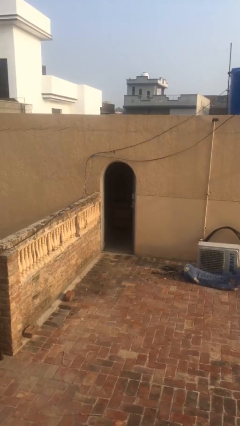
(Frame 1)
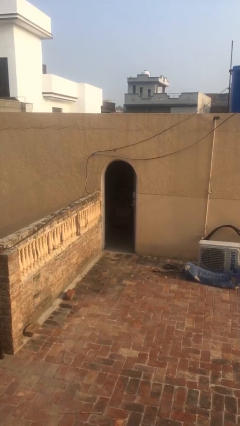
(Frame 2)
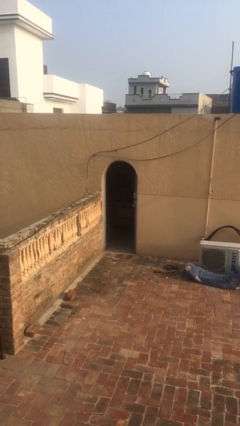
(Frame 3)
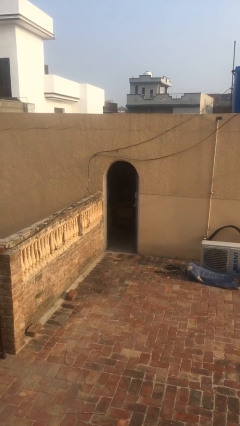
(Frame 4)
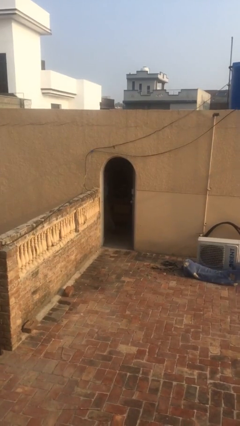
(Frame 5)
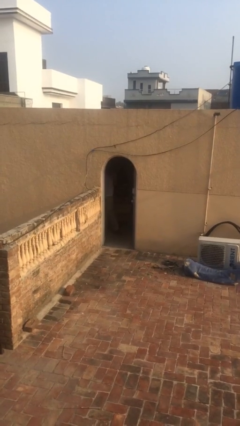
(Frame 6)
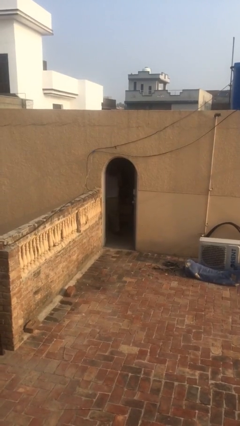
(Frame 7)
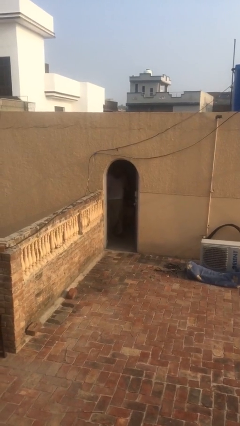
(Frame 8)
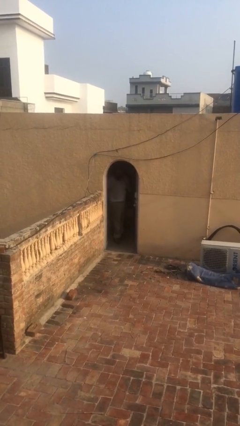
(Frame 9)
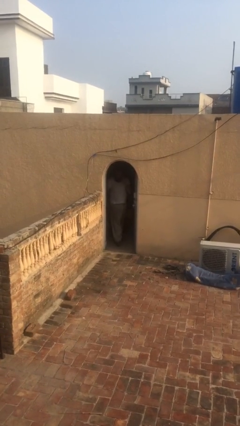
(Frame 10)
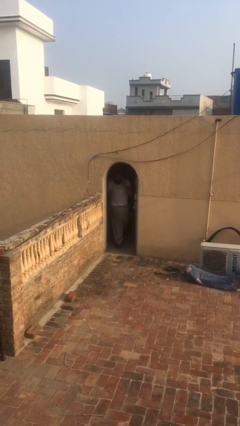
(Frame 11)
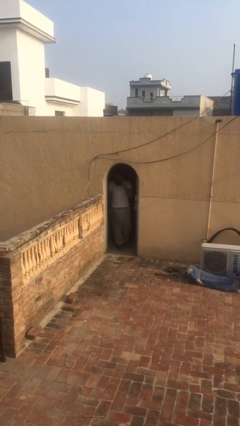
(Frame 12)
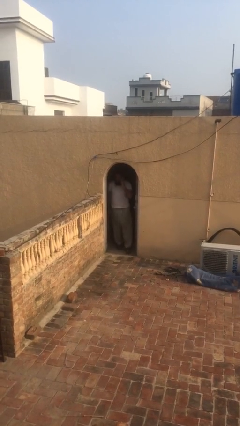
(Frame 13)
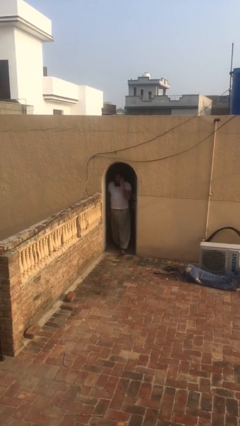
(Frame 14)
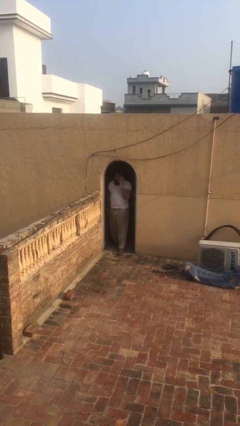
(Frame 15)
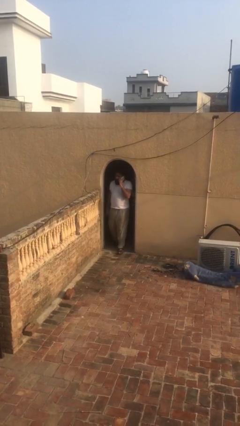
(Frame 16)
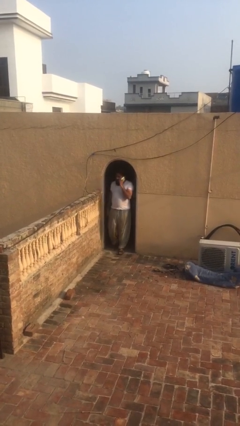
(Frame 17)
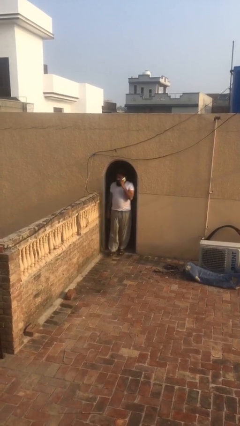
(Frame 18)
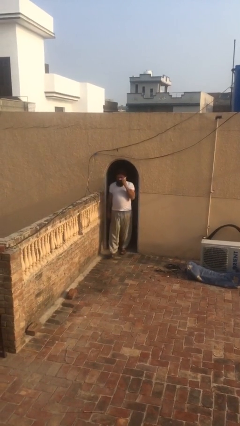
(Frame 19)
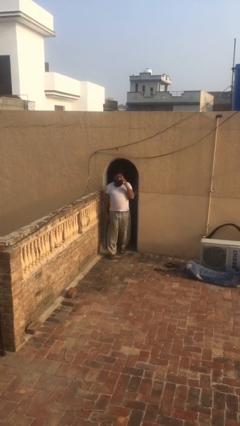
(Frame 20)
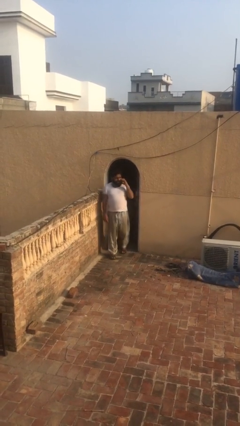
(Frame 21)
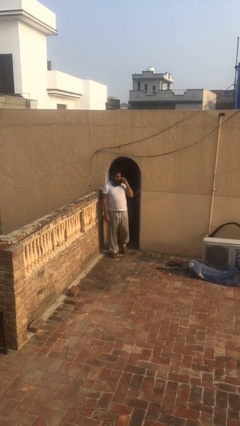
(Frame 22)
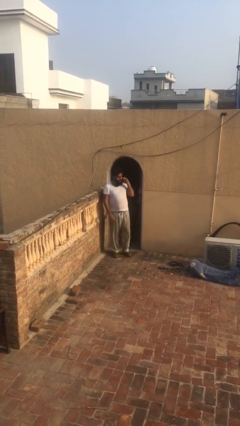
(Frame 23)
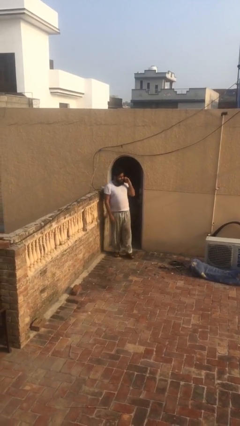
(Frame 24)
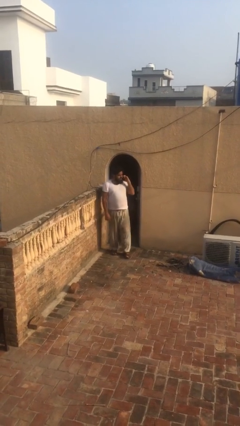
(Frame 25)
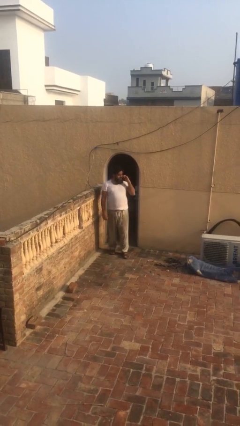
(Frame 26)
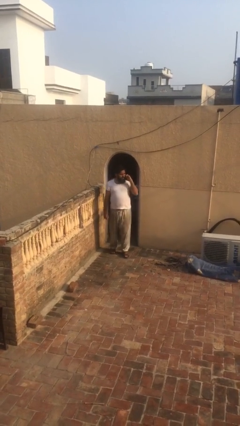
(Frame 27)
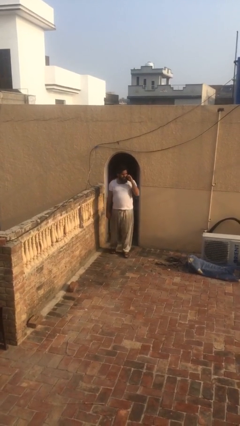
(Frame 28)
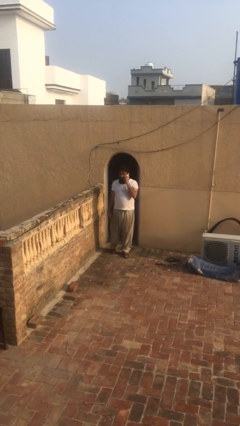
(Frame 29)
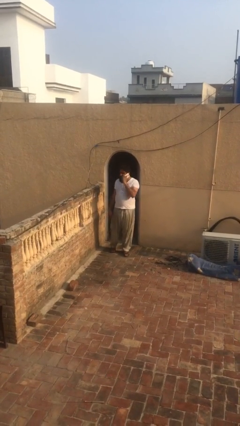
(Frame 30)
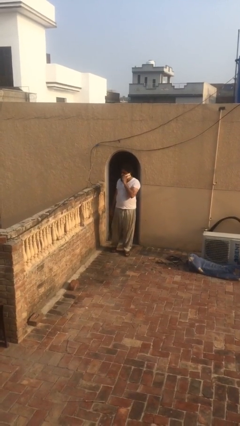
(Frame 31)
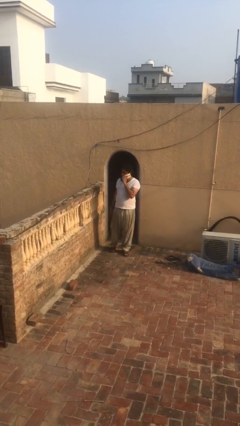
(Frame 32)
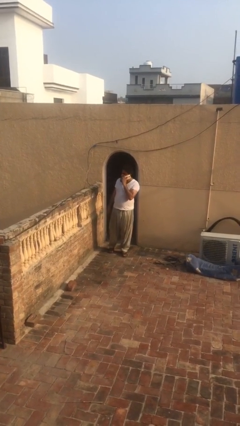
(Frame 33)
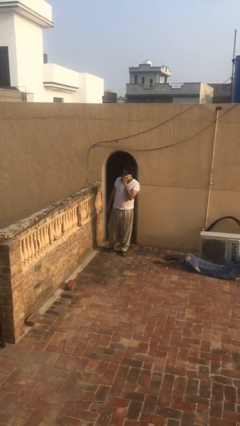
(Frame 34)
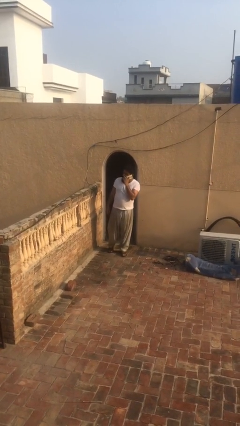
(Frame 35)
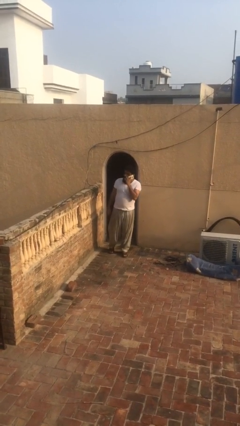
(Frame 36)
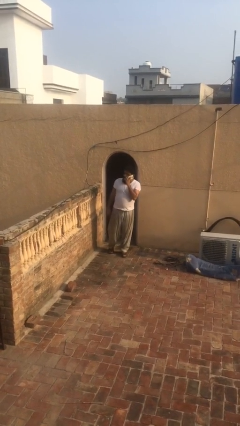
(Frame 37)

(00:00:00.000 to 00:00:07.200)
person enters scene through structure

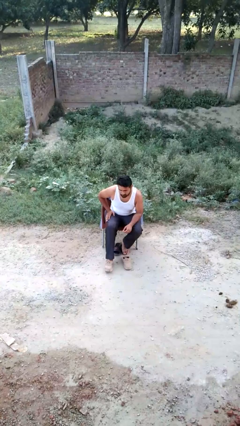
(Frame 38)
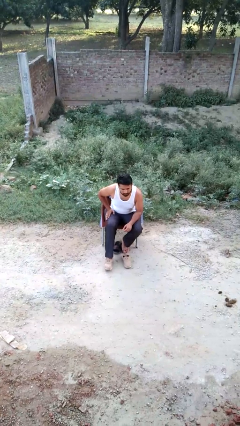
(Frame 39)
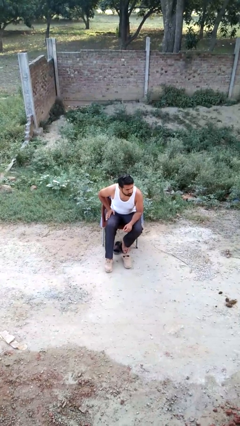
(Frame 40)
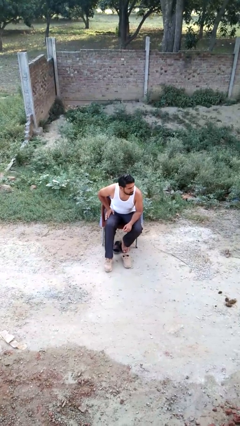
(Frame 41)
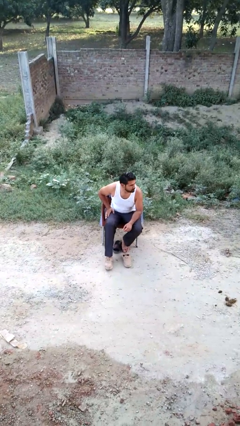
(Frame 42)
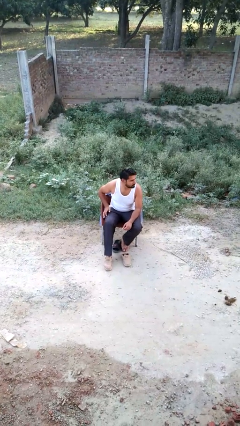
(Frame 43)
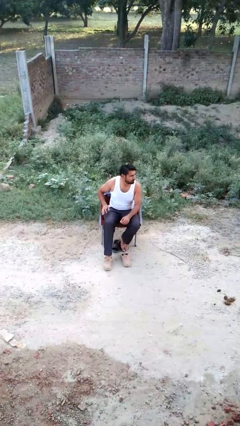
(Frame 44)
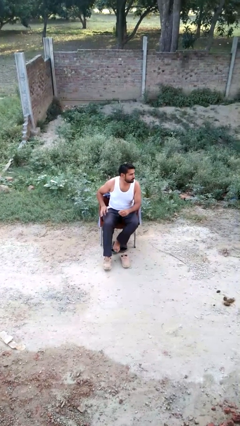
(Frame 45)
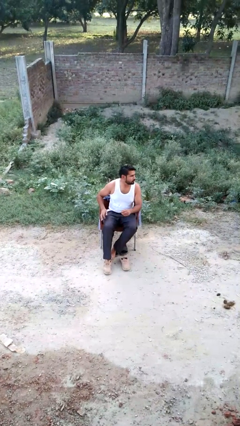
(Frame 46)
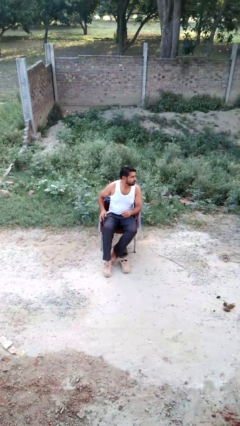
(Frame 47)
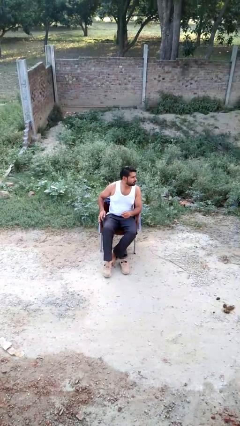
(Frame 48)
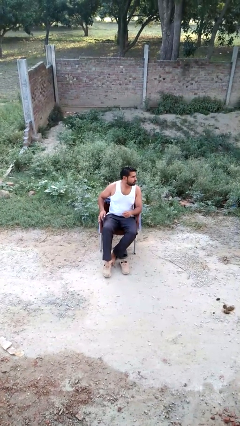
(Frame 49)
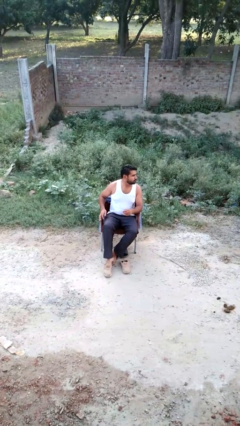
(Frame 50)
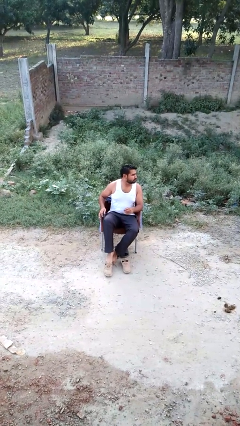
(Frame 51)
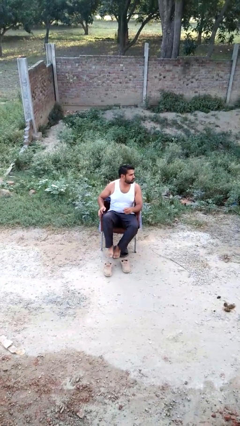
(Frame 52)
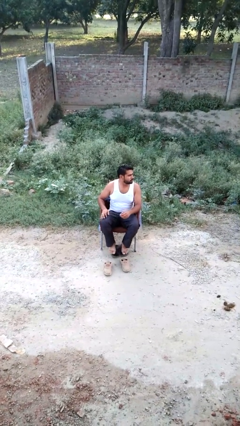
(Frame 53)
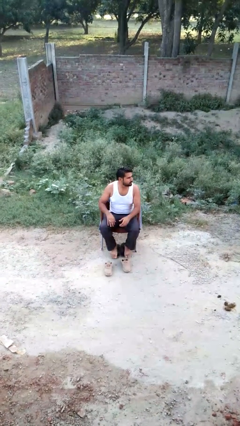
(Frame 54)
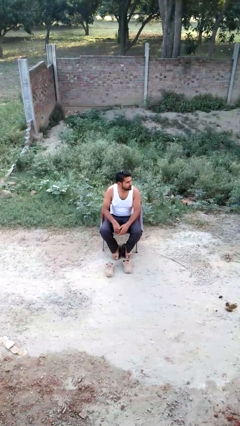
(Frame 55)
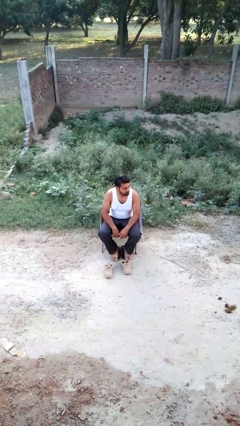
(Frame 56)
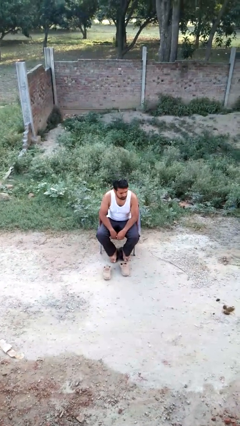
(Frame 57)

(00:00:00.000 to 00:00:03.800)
person takes off shoes

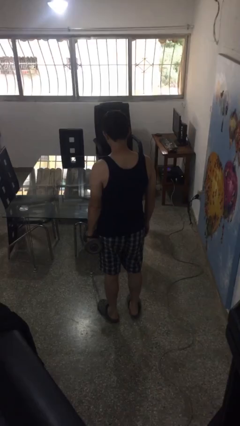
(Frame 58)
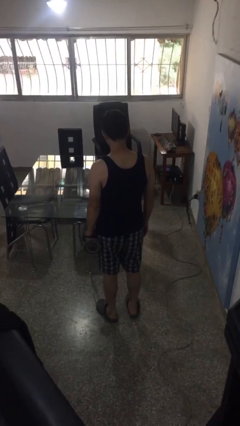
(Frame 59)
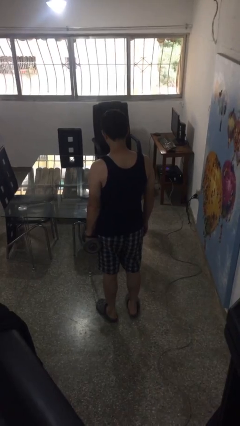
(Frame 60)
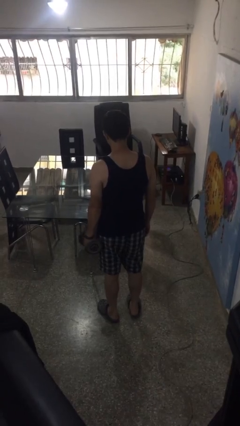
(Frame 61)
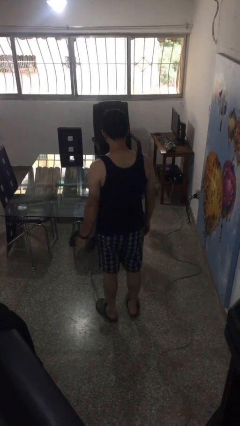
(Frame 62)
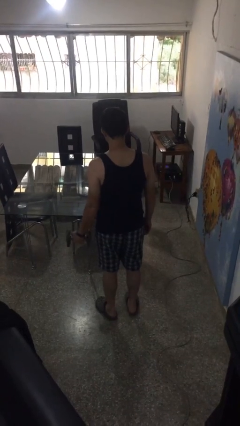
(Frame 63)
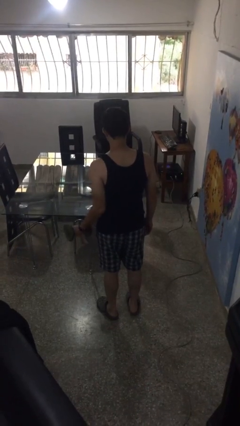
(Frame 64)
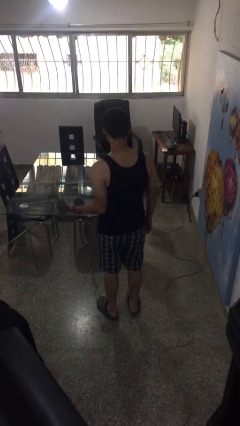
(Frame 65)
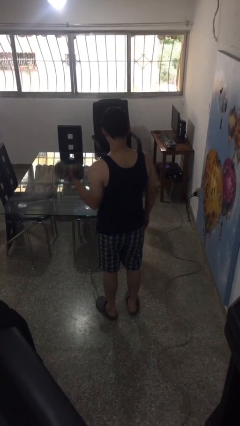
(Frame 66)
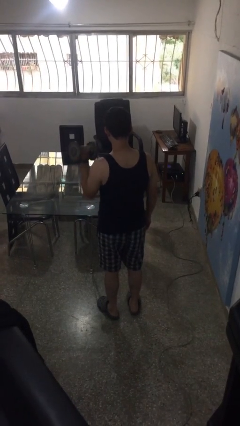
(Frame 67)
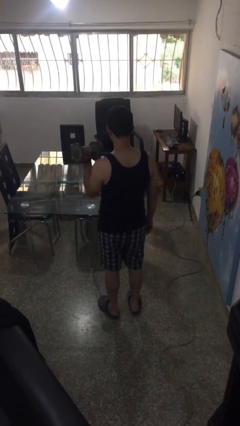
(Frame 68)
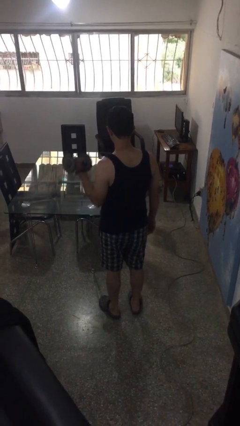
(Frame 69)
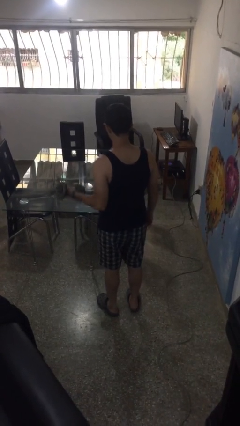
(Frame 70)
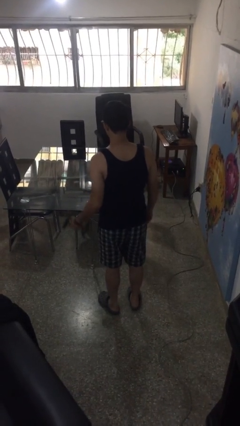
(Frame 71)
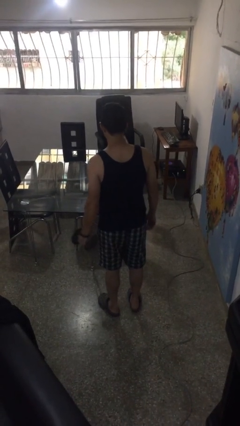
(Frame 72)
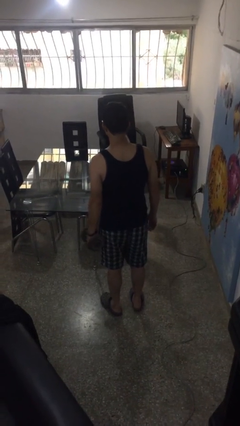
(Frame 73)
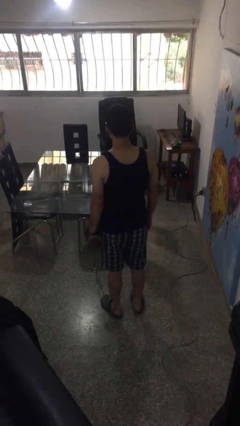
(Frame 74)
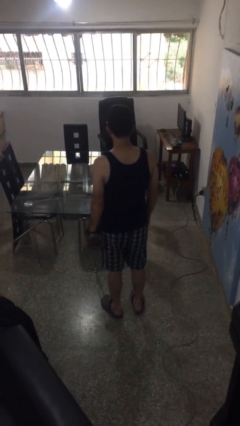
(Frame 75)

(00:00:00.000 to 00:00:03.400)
person lifts dumbbells

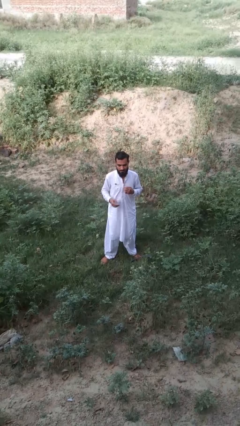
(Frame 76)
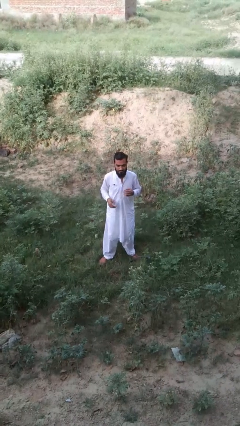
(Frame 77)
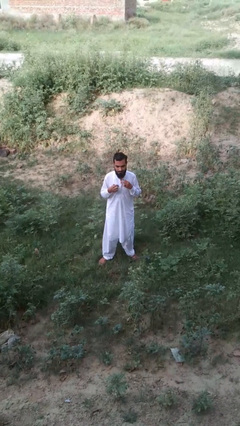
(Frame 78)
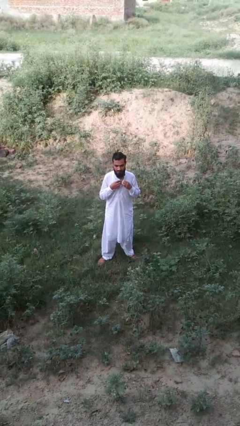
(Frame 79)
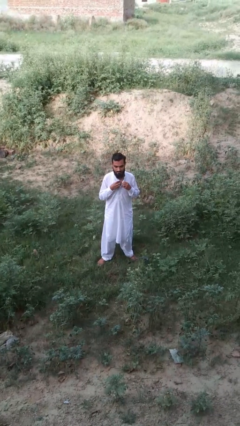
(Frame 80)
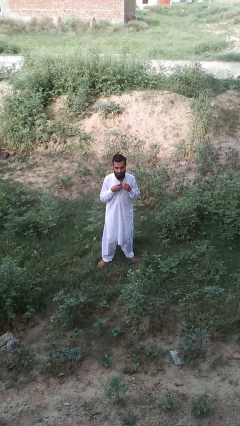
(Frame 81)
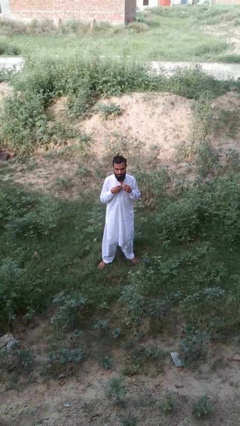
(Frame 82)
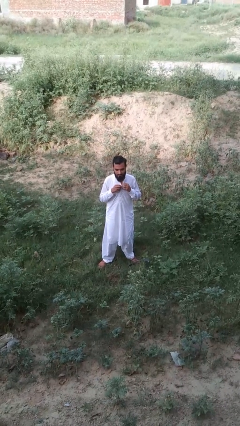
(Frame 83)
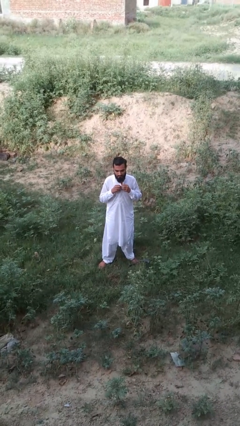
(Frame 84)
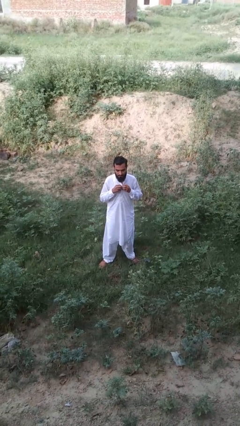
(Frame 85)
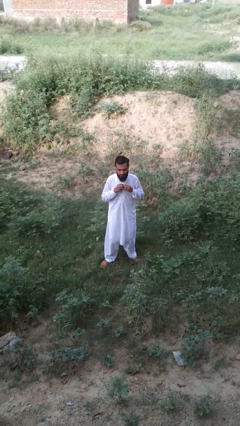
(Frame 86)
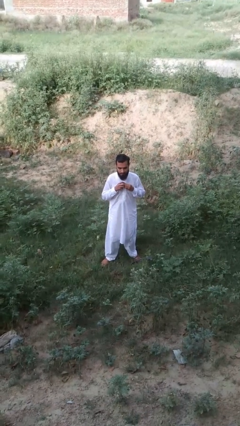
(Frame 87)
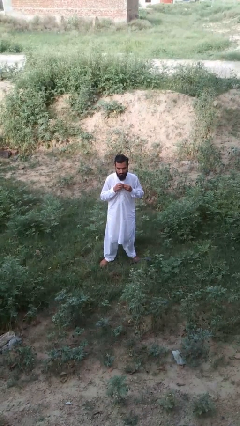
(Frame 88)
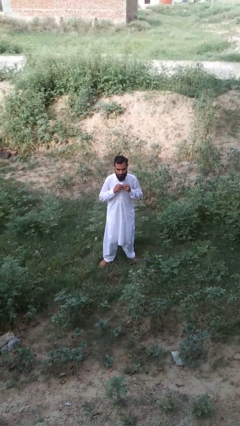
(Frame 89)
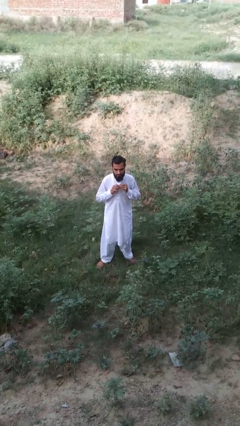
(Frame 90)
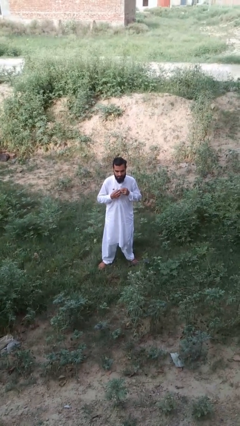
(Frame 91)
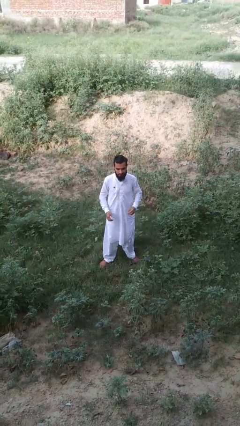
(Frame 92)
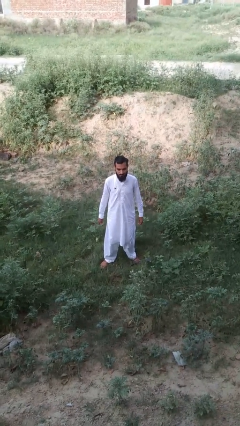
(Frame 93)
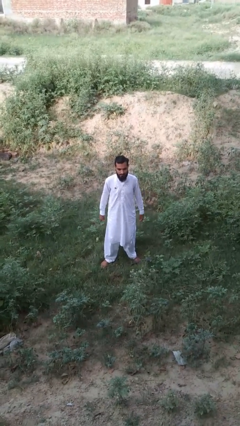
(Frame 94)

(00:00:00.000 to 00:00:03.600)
person buttons shirt
